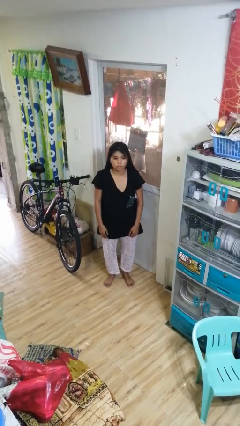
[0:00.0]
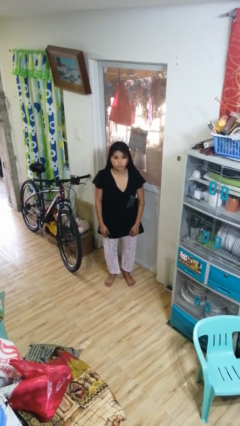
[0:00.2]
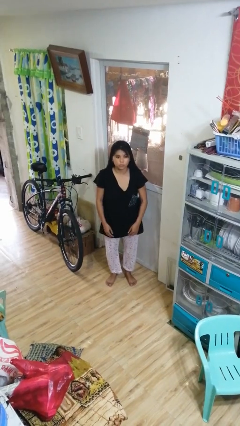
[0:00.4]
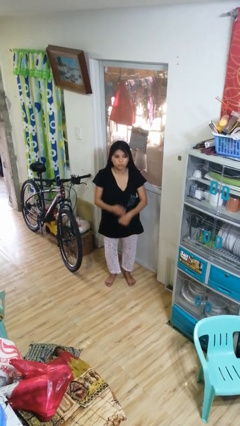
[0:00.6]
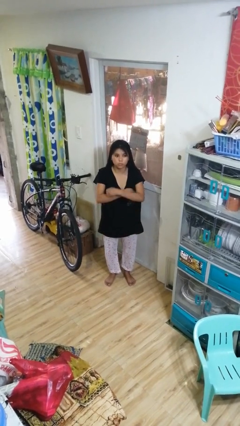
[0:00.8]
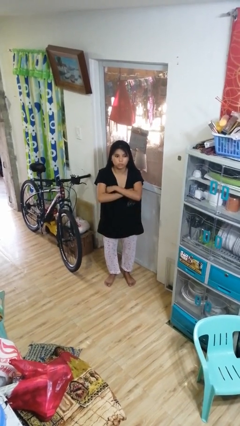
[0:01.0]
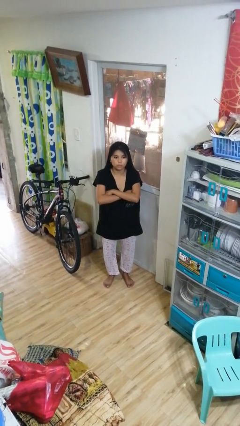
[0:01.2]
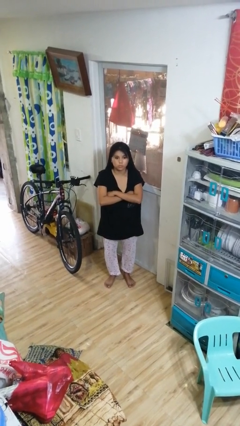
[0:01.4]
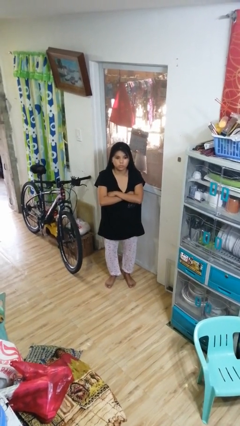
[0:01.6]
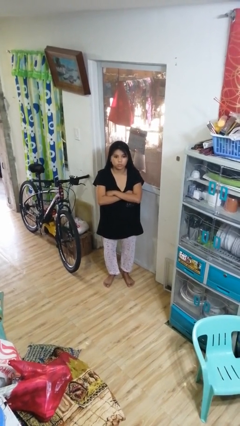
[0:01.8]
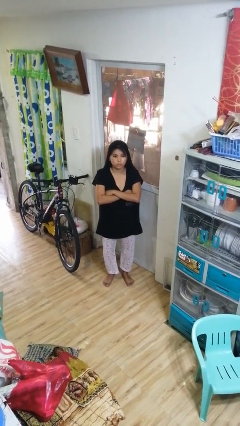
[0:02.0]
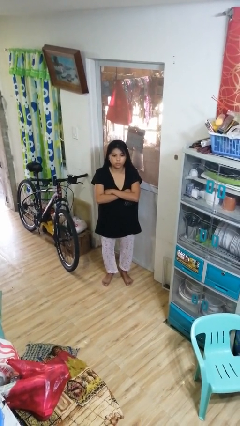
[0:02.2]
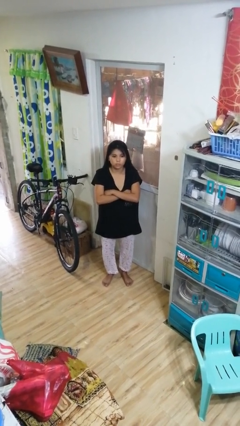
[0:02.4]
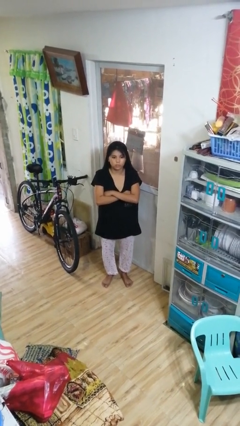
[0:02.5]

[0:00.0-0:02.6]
person crosses arms

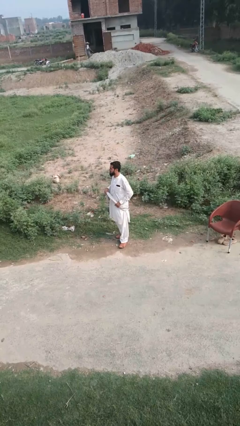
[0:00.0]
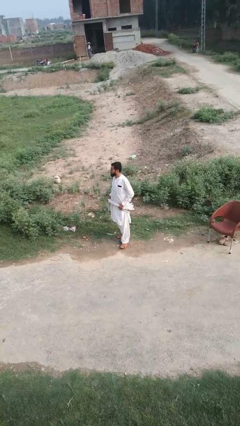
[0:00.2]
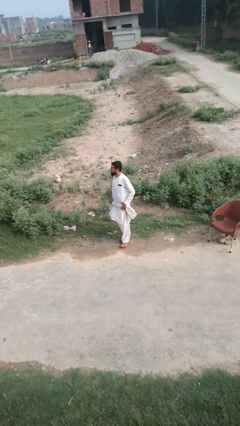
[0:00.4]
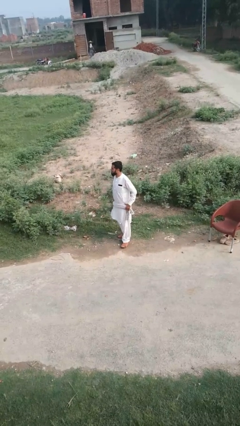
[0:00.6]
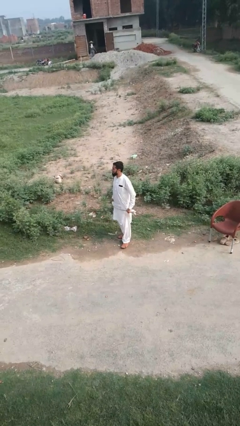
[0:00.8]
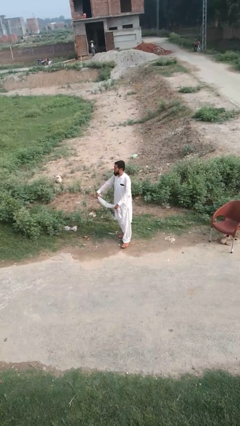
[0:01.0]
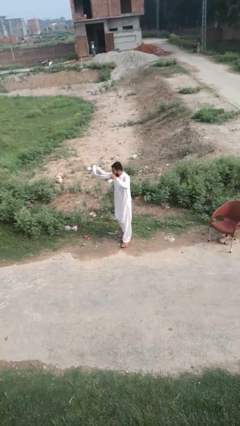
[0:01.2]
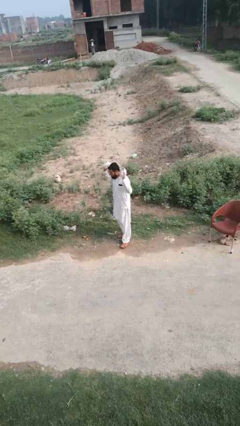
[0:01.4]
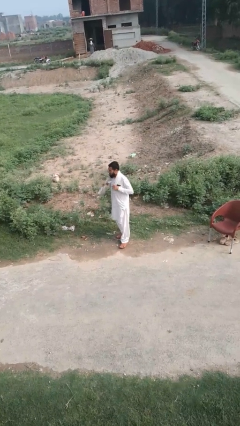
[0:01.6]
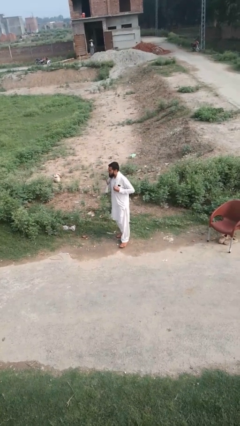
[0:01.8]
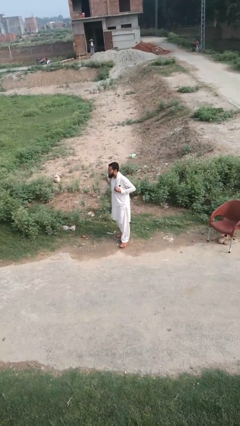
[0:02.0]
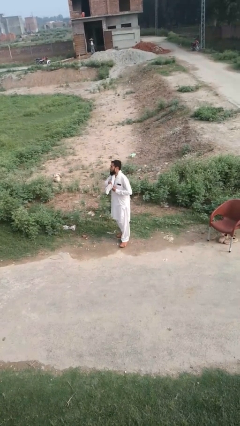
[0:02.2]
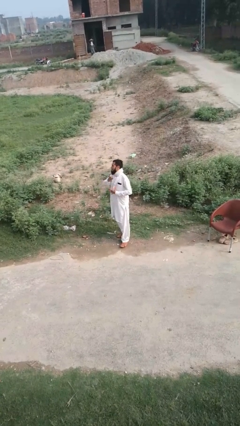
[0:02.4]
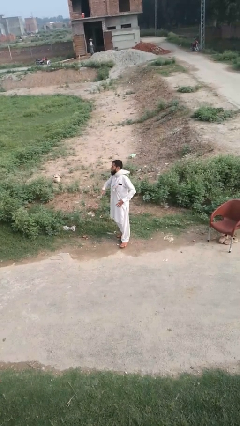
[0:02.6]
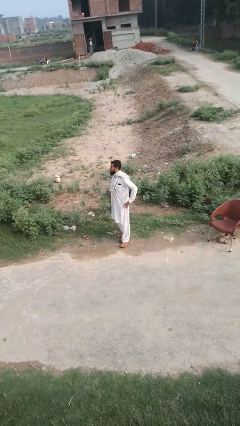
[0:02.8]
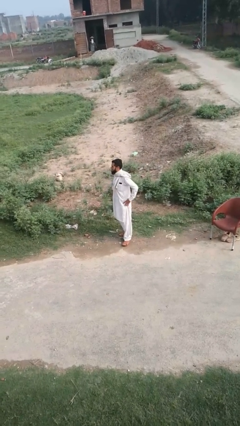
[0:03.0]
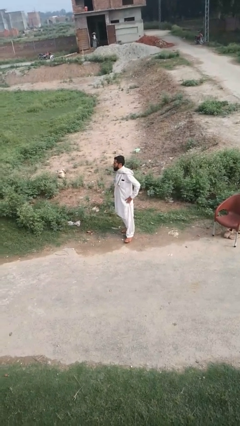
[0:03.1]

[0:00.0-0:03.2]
person puts on scarf

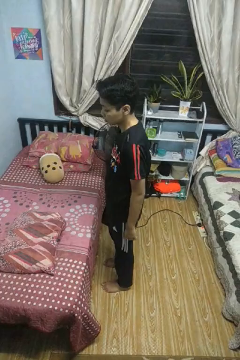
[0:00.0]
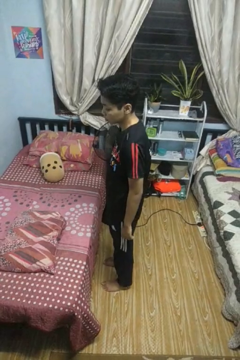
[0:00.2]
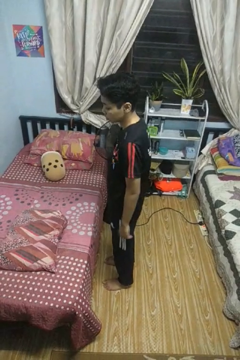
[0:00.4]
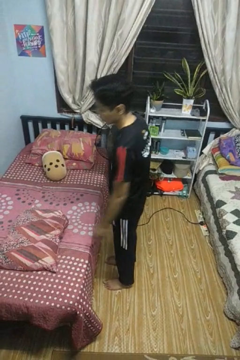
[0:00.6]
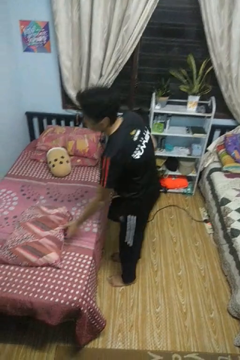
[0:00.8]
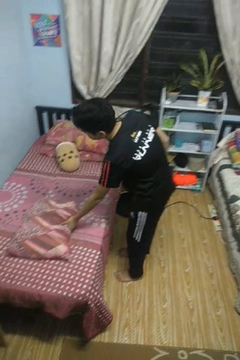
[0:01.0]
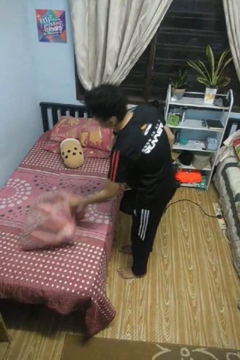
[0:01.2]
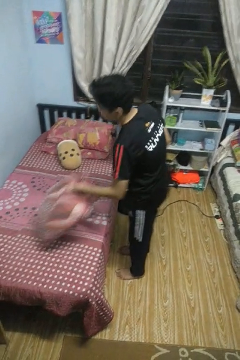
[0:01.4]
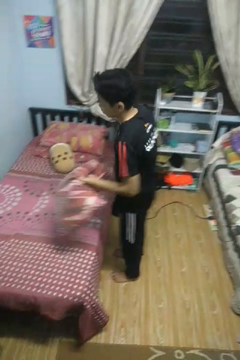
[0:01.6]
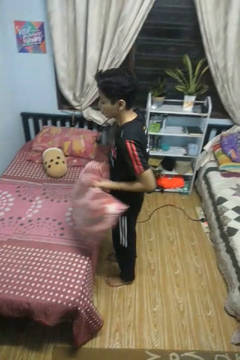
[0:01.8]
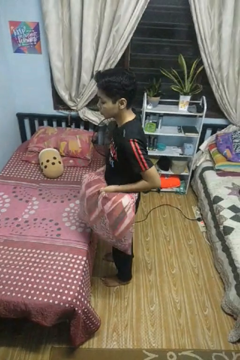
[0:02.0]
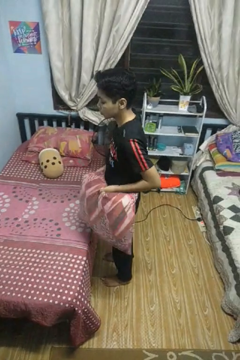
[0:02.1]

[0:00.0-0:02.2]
person picks up object from bed

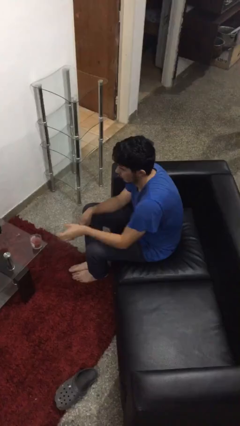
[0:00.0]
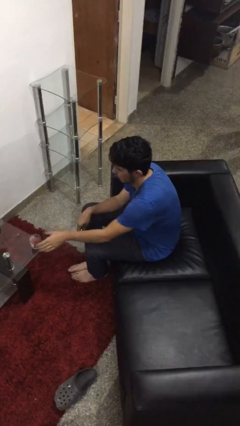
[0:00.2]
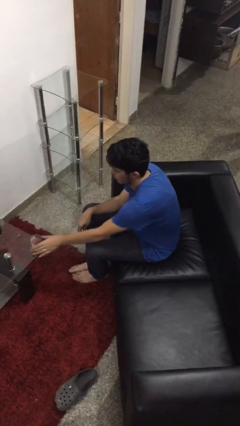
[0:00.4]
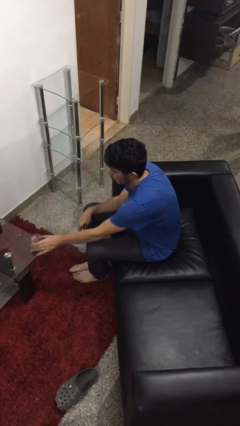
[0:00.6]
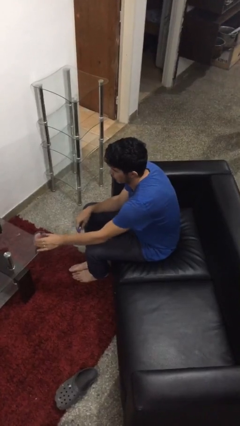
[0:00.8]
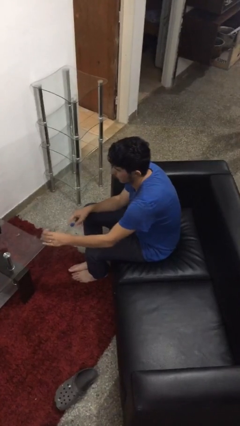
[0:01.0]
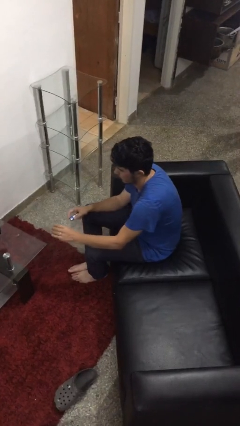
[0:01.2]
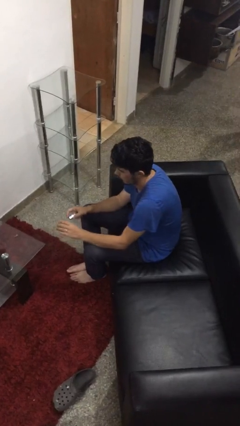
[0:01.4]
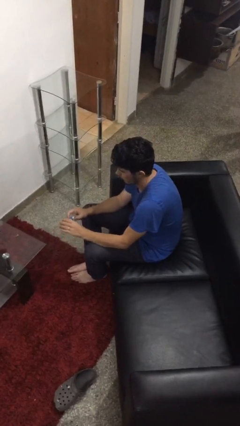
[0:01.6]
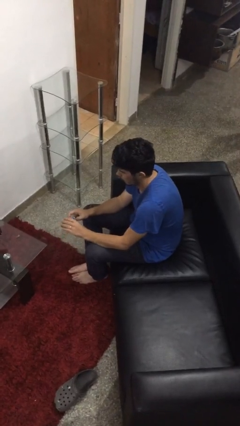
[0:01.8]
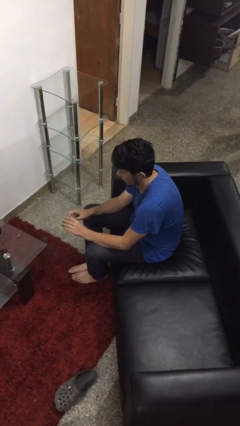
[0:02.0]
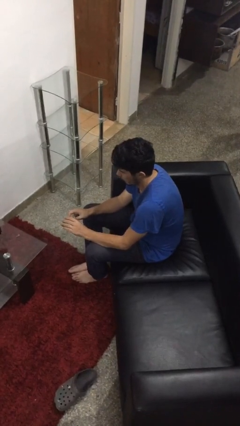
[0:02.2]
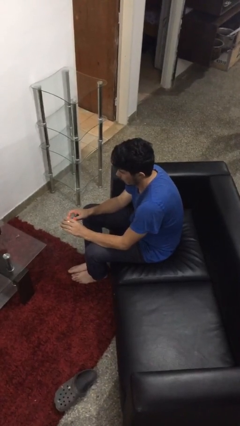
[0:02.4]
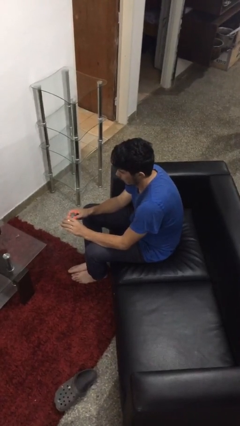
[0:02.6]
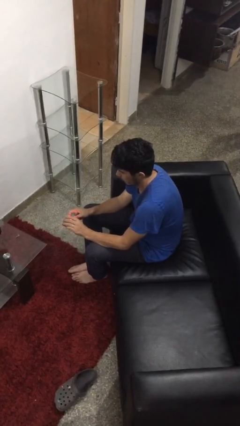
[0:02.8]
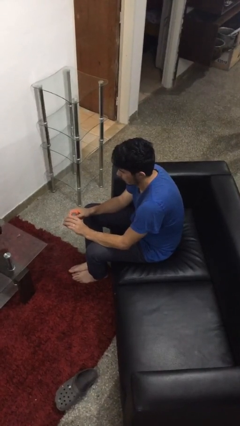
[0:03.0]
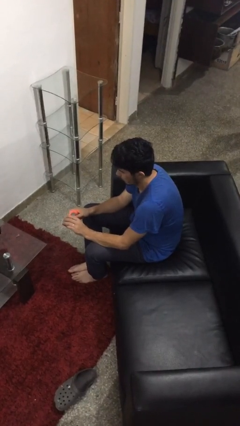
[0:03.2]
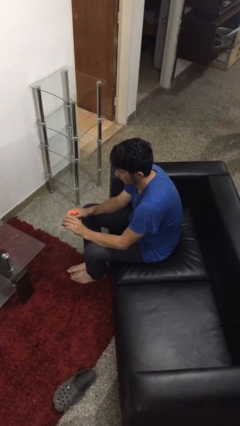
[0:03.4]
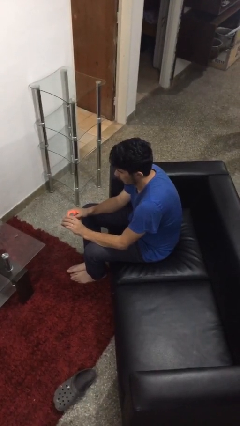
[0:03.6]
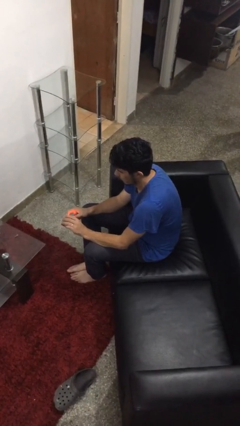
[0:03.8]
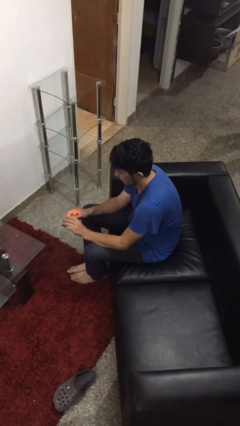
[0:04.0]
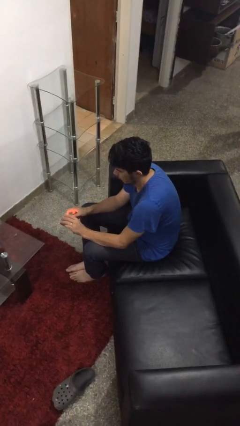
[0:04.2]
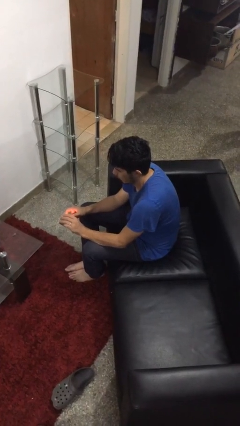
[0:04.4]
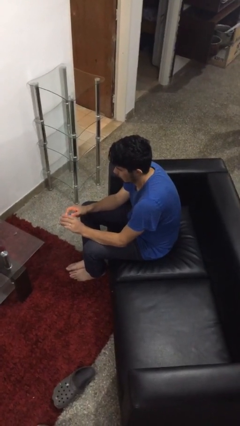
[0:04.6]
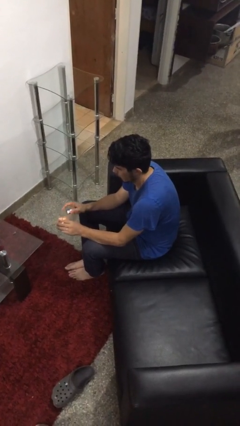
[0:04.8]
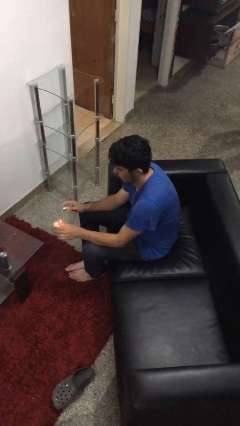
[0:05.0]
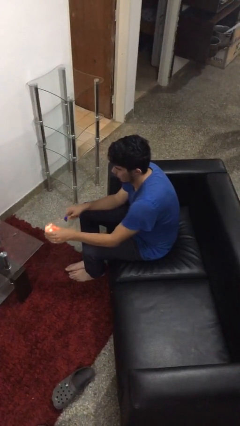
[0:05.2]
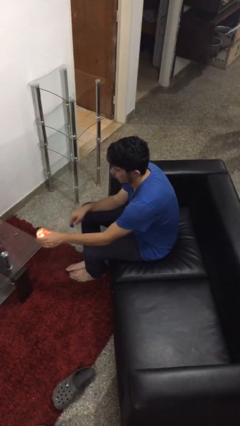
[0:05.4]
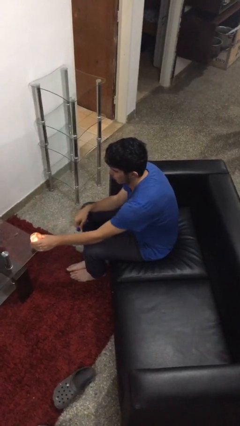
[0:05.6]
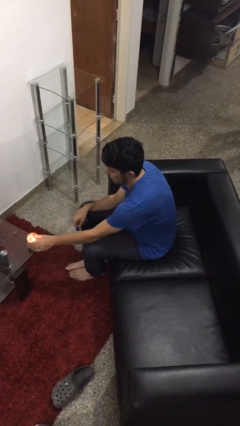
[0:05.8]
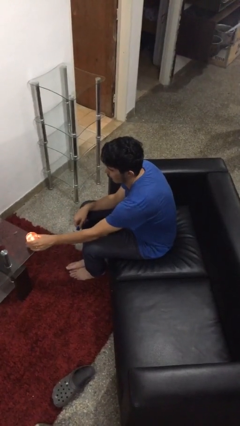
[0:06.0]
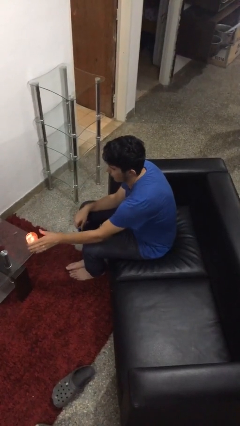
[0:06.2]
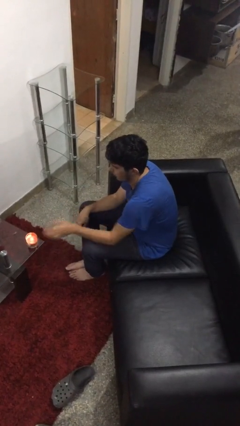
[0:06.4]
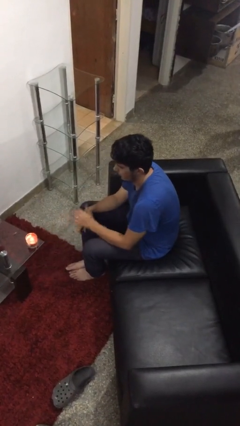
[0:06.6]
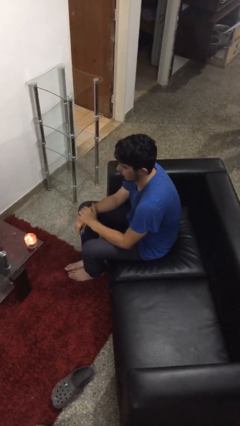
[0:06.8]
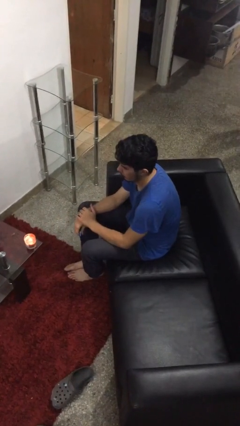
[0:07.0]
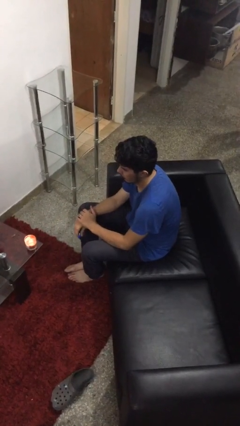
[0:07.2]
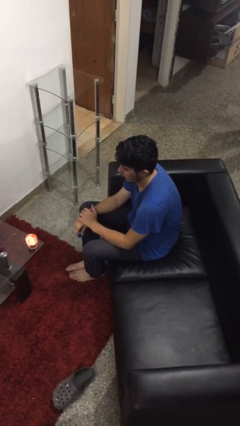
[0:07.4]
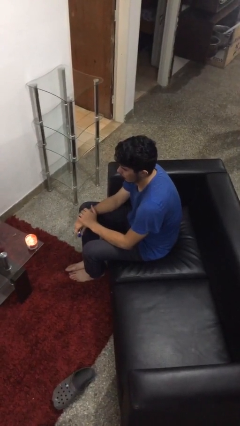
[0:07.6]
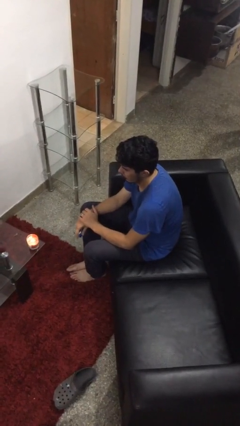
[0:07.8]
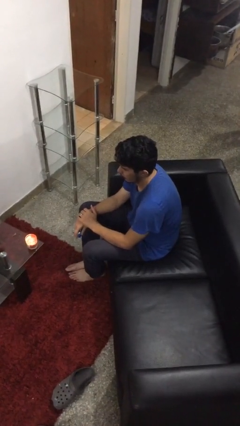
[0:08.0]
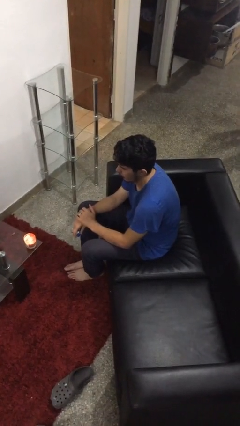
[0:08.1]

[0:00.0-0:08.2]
person lights candle

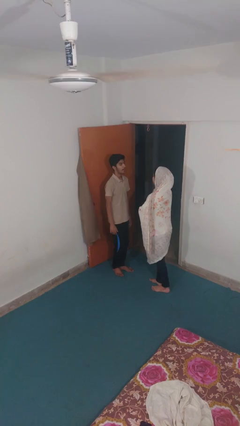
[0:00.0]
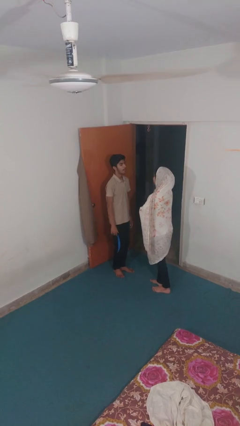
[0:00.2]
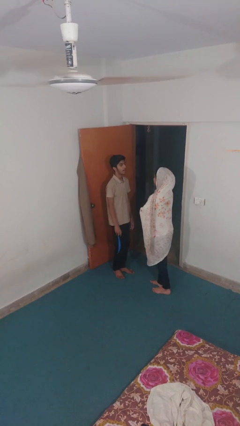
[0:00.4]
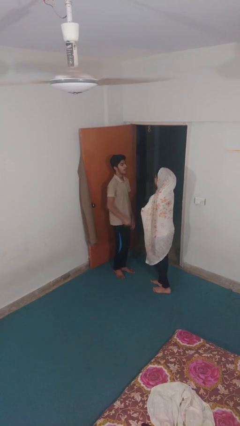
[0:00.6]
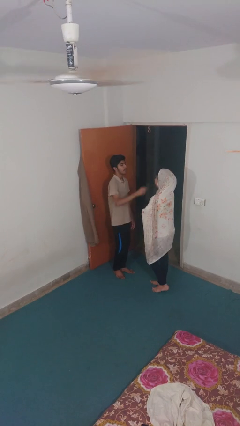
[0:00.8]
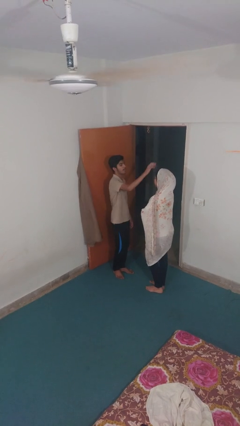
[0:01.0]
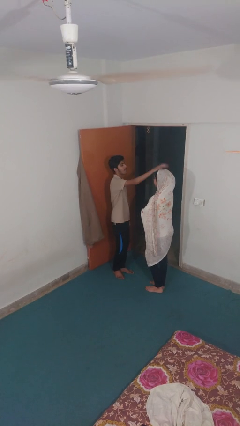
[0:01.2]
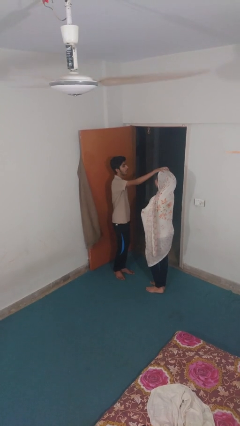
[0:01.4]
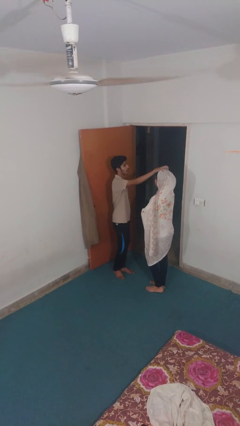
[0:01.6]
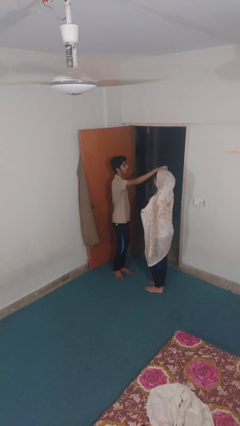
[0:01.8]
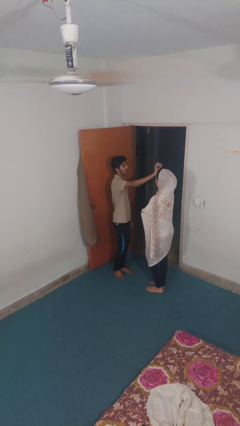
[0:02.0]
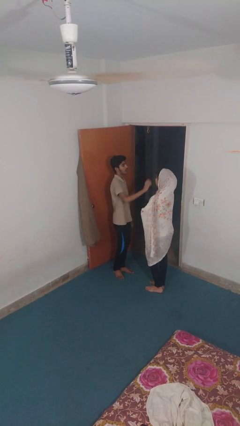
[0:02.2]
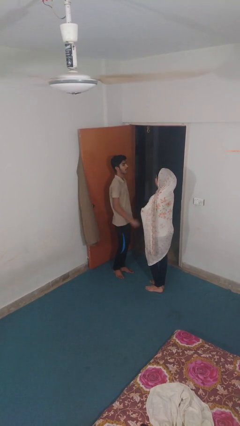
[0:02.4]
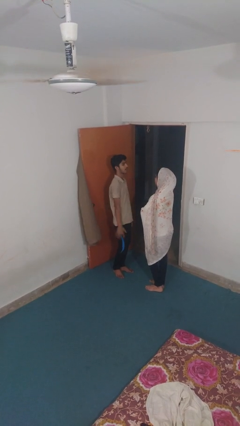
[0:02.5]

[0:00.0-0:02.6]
person grabs person by hair
